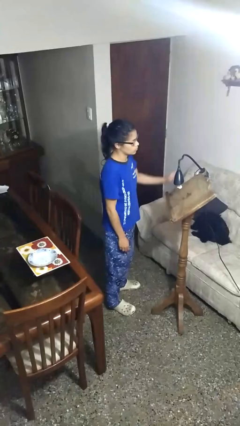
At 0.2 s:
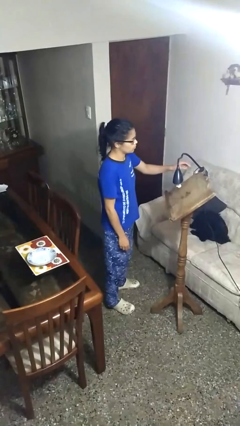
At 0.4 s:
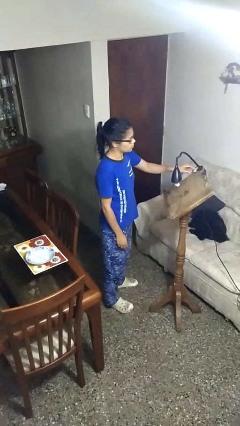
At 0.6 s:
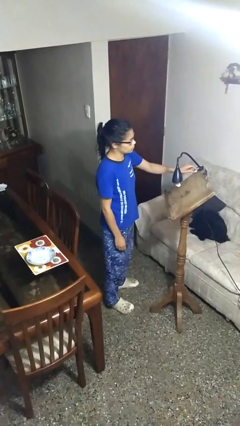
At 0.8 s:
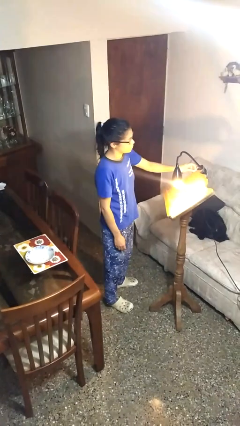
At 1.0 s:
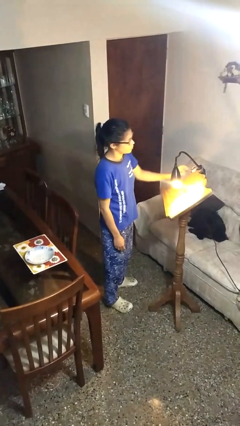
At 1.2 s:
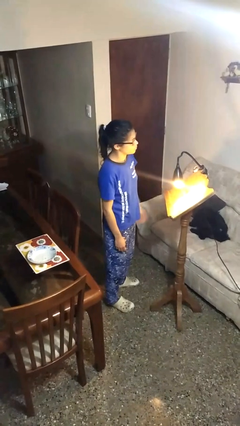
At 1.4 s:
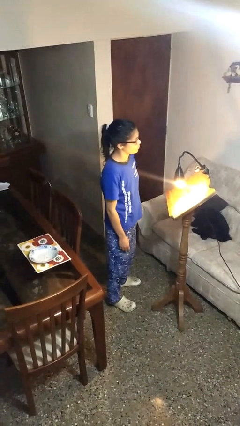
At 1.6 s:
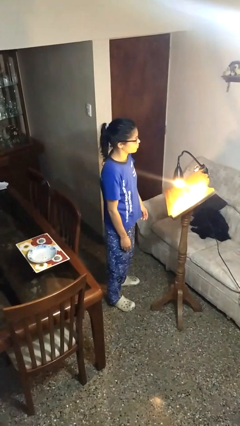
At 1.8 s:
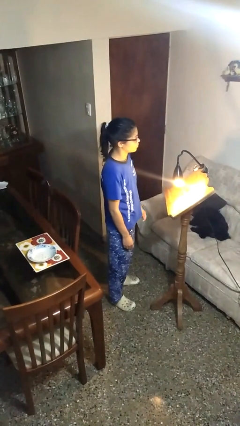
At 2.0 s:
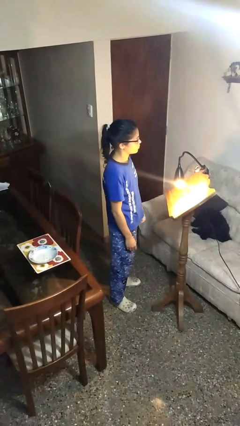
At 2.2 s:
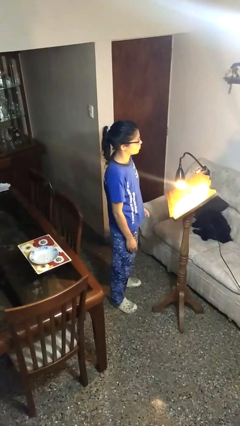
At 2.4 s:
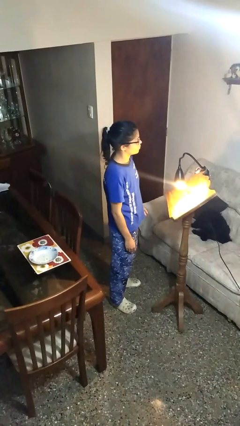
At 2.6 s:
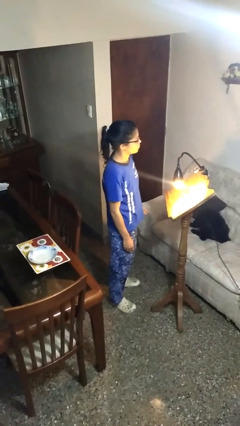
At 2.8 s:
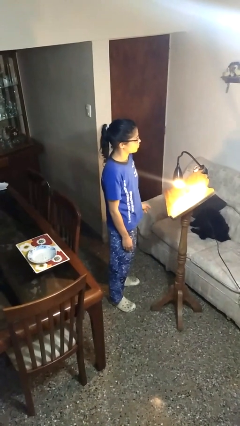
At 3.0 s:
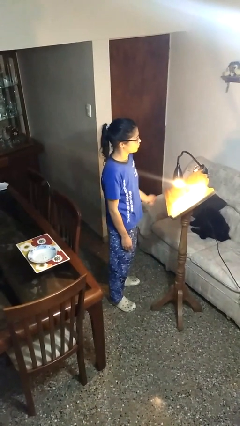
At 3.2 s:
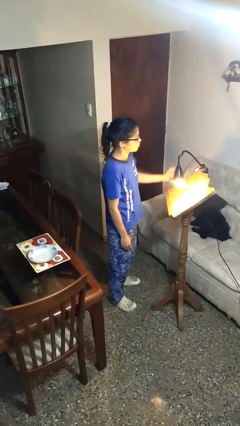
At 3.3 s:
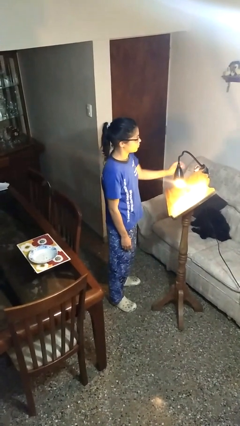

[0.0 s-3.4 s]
person turns on lamp

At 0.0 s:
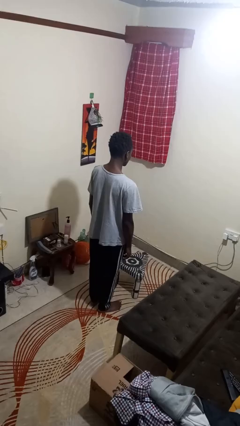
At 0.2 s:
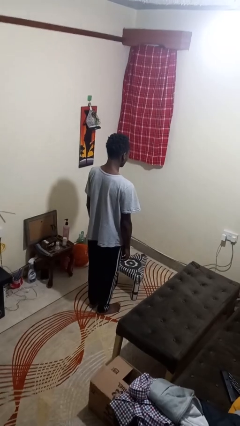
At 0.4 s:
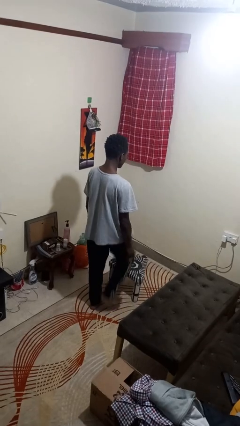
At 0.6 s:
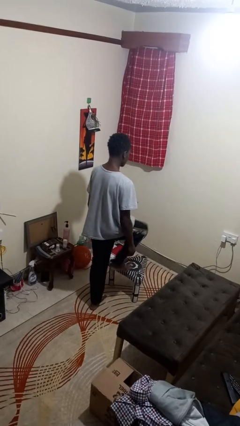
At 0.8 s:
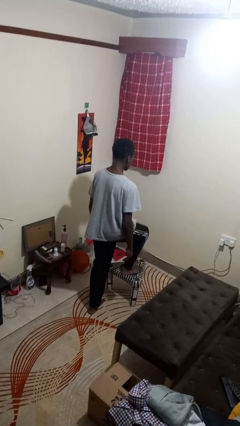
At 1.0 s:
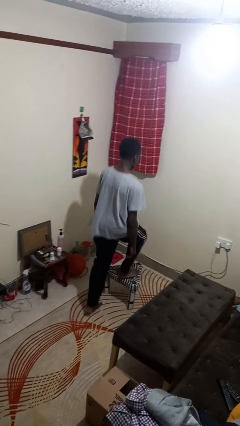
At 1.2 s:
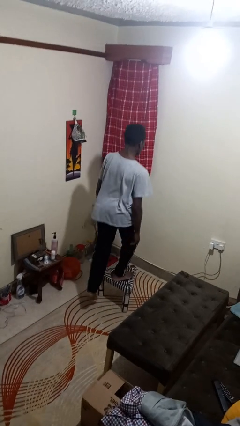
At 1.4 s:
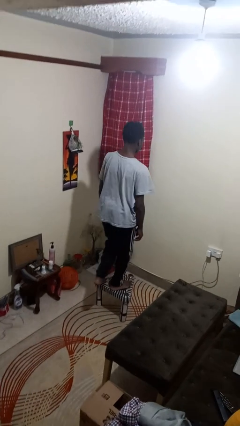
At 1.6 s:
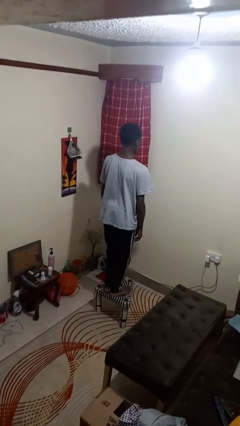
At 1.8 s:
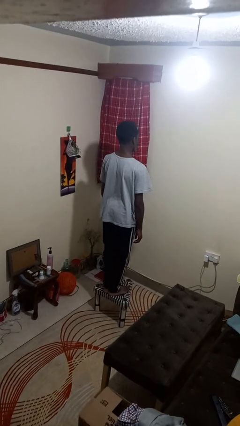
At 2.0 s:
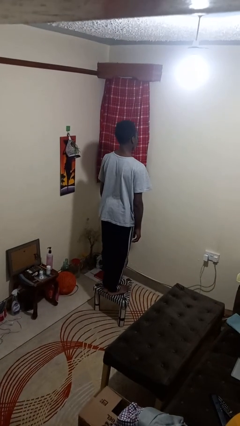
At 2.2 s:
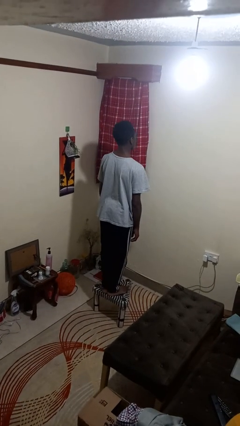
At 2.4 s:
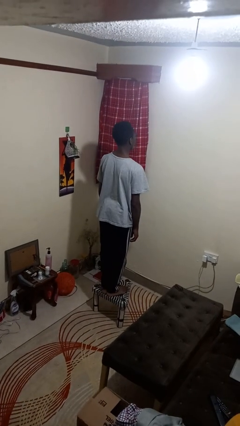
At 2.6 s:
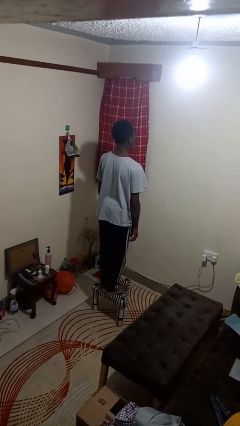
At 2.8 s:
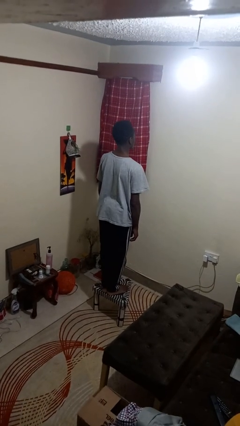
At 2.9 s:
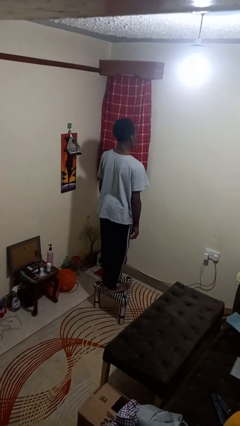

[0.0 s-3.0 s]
person climbs on chair

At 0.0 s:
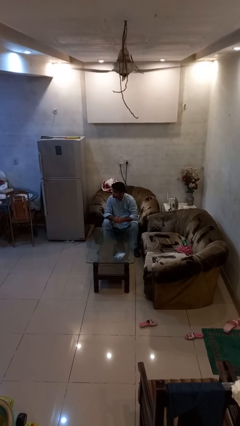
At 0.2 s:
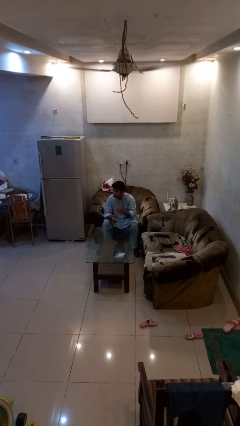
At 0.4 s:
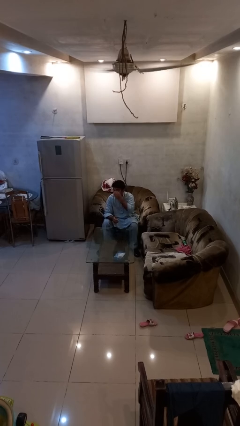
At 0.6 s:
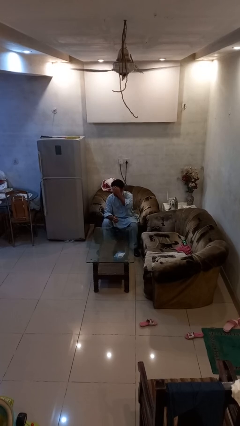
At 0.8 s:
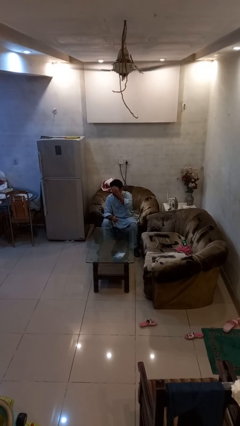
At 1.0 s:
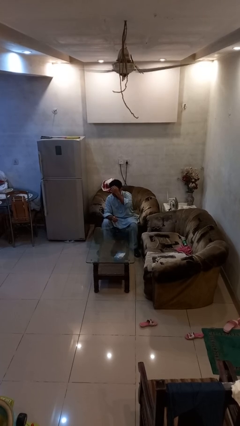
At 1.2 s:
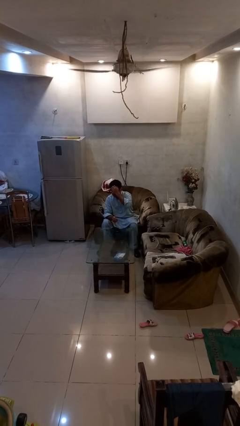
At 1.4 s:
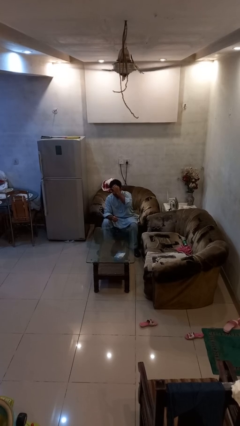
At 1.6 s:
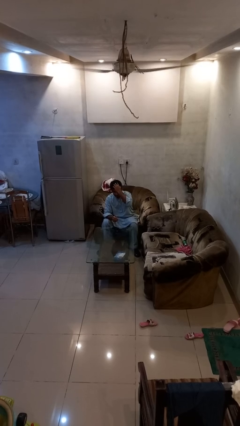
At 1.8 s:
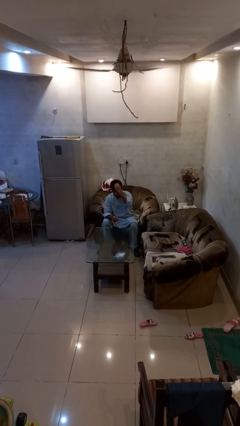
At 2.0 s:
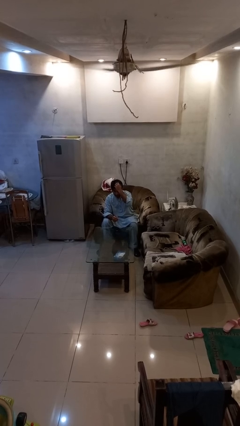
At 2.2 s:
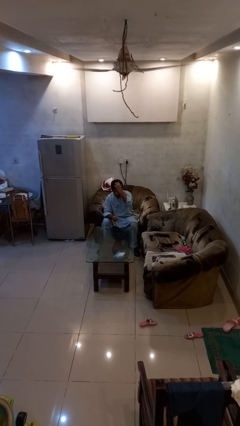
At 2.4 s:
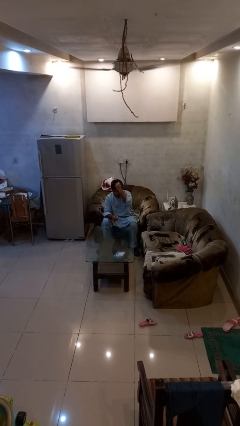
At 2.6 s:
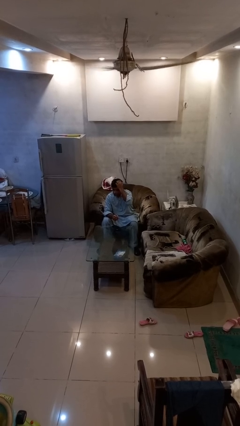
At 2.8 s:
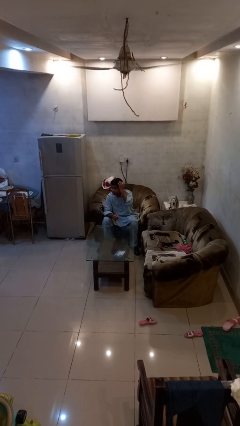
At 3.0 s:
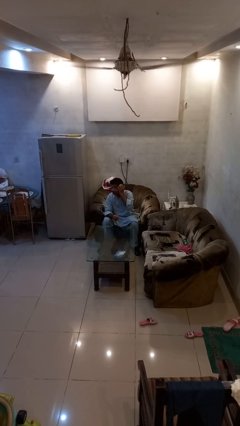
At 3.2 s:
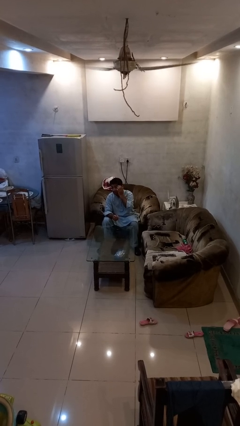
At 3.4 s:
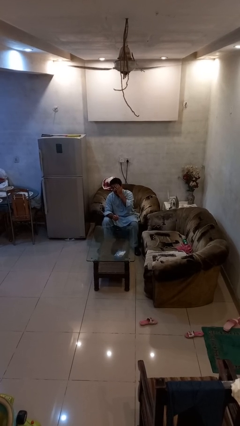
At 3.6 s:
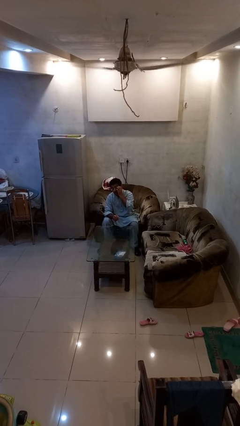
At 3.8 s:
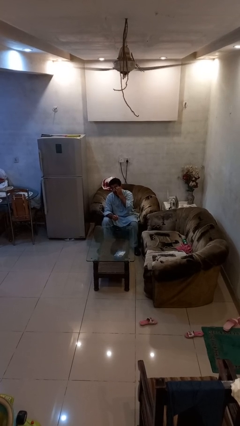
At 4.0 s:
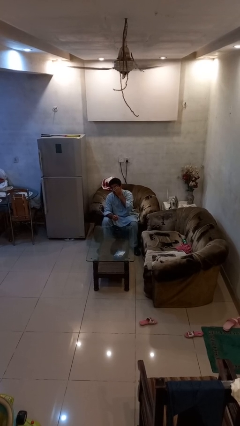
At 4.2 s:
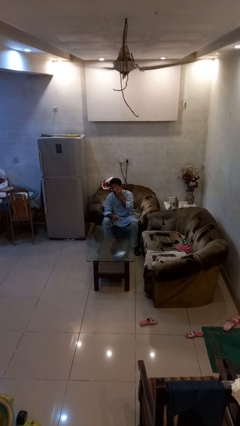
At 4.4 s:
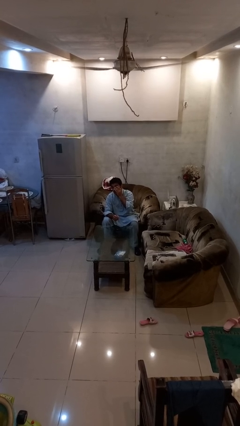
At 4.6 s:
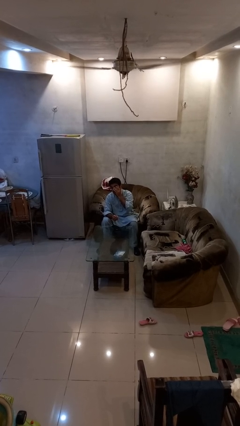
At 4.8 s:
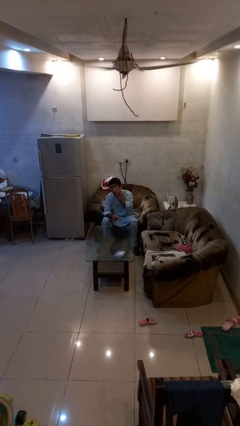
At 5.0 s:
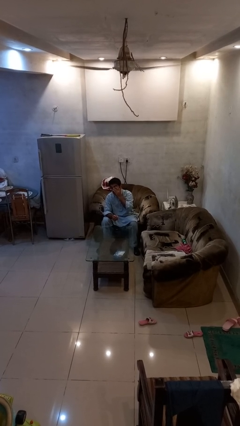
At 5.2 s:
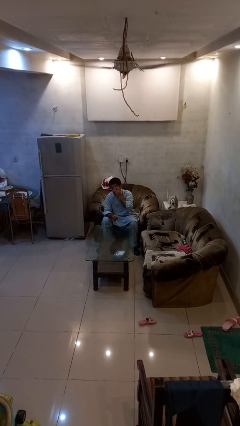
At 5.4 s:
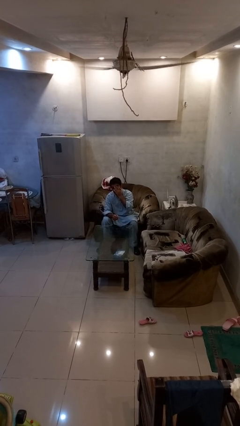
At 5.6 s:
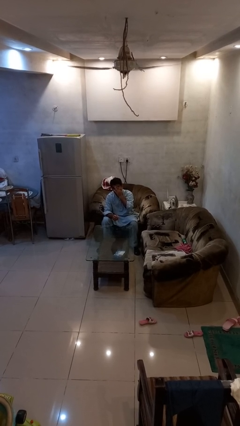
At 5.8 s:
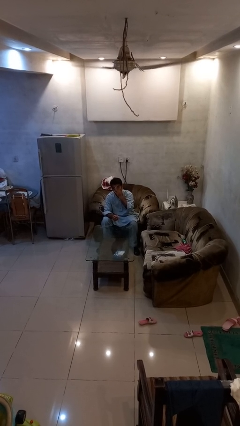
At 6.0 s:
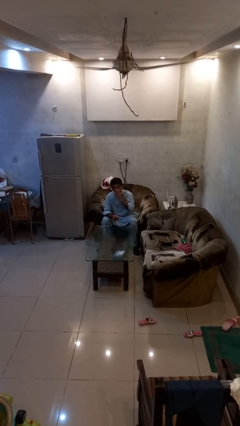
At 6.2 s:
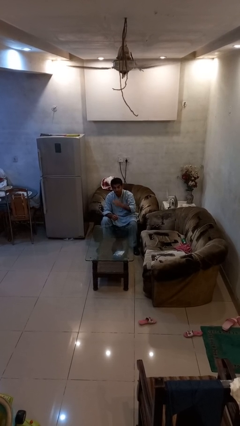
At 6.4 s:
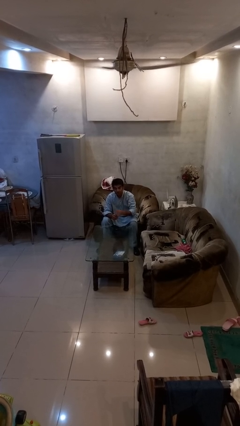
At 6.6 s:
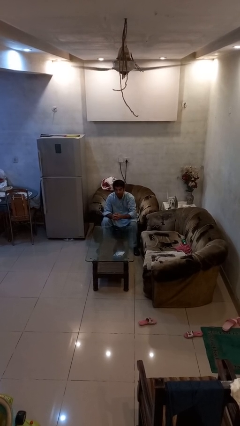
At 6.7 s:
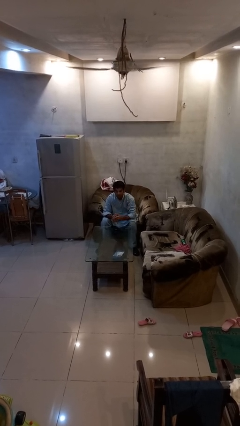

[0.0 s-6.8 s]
person scratches face

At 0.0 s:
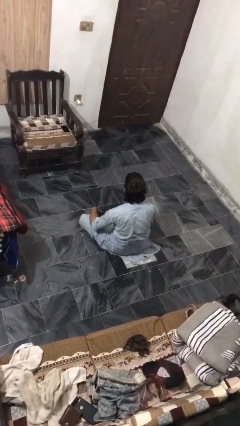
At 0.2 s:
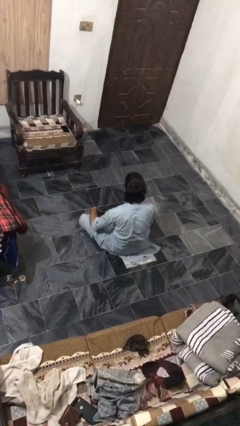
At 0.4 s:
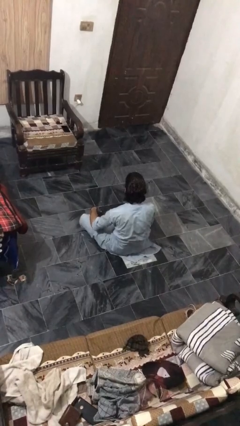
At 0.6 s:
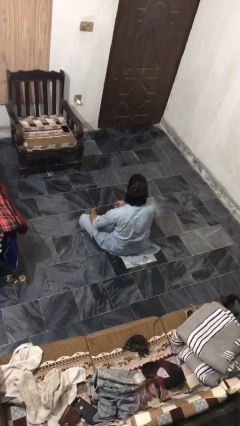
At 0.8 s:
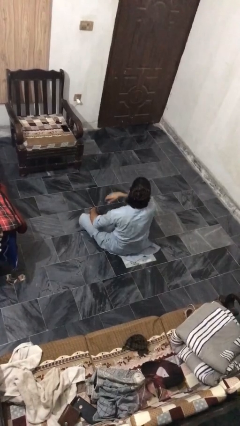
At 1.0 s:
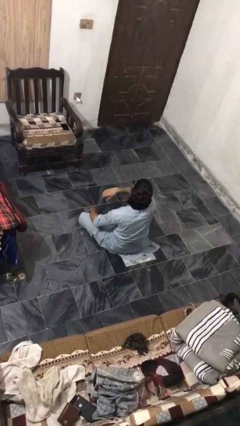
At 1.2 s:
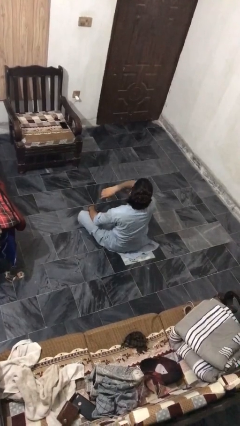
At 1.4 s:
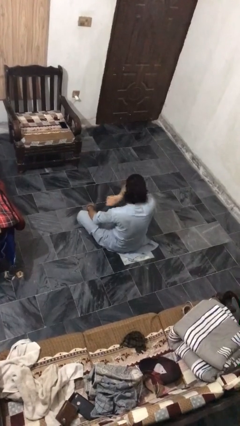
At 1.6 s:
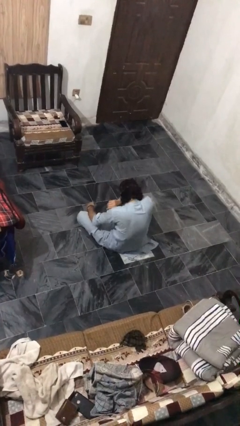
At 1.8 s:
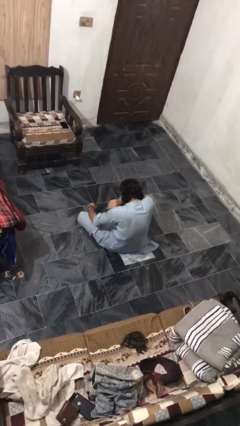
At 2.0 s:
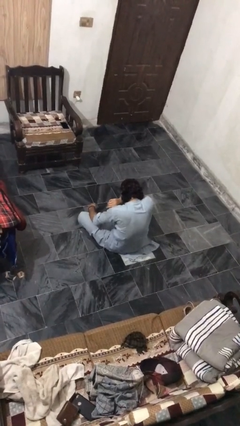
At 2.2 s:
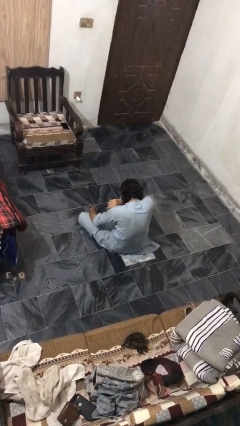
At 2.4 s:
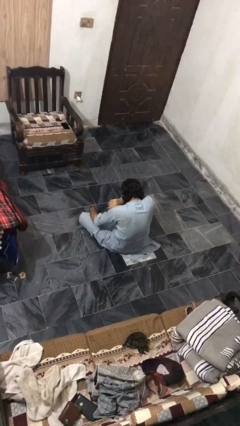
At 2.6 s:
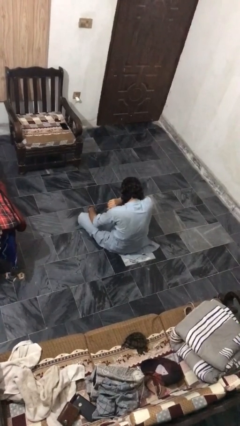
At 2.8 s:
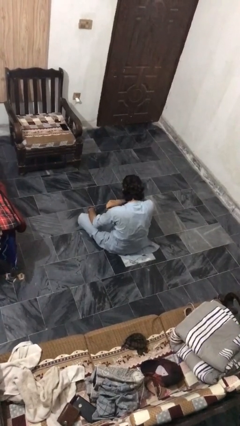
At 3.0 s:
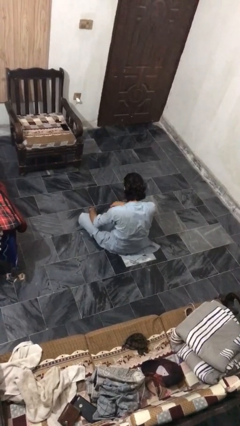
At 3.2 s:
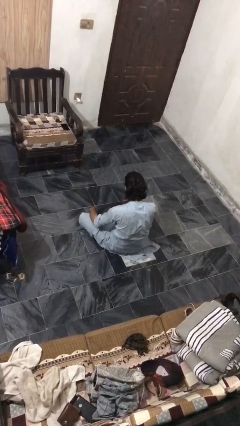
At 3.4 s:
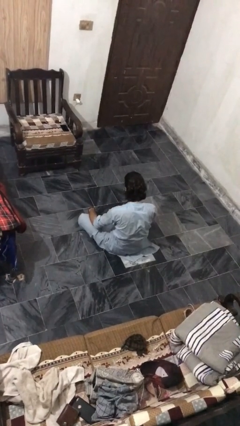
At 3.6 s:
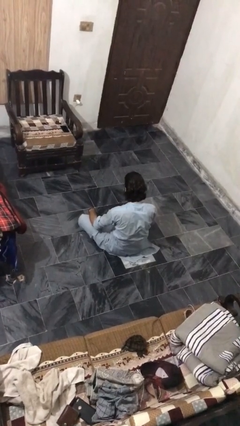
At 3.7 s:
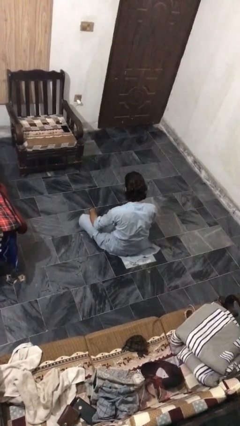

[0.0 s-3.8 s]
person sneezes into arm

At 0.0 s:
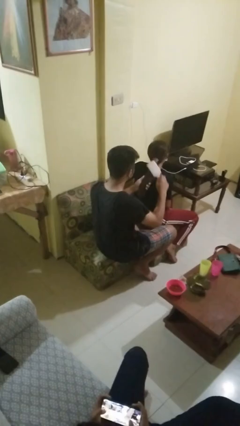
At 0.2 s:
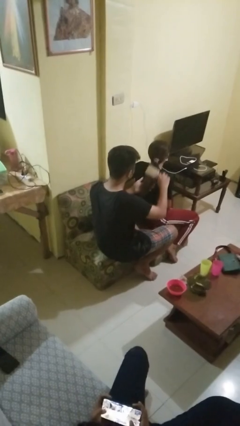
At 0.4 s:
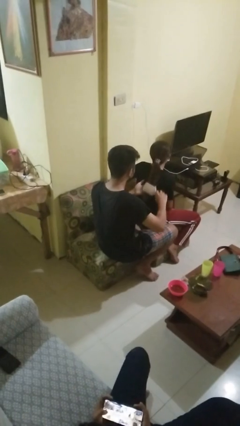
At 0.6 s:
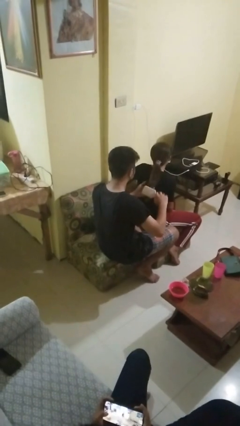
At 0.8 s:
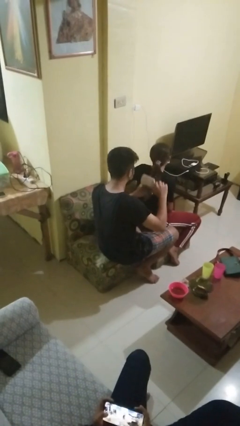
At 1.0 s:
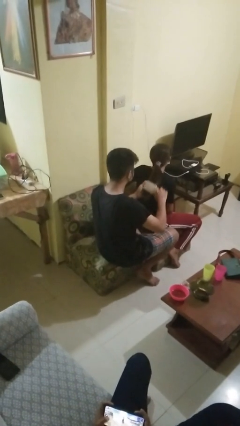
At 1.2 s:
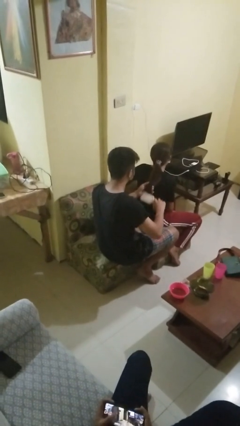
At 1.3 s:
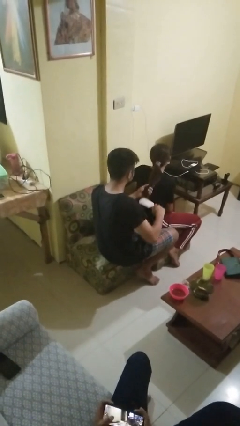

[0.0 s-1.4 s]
person brushes hair of person
